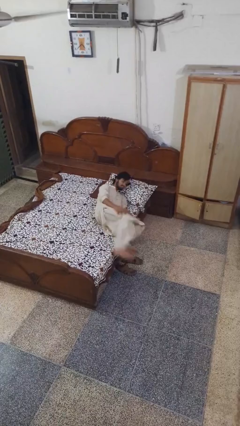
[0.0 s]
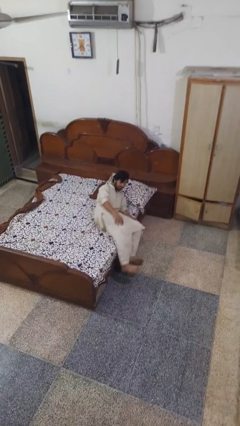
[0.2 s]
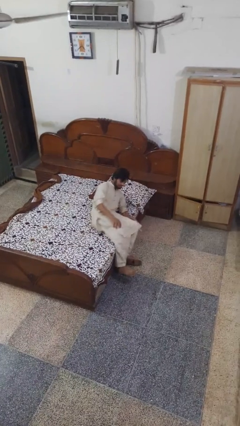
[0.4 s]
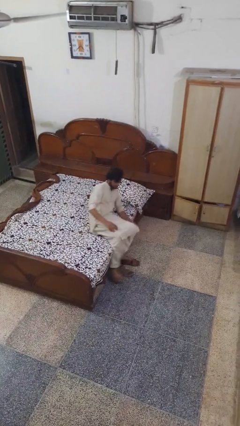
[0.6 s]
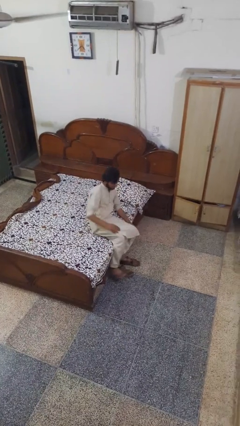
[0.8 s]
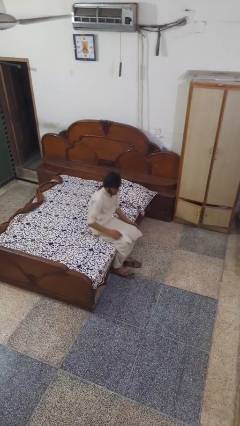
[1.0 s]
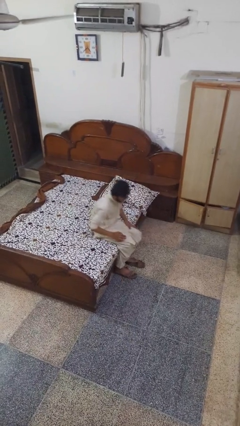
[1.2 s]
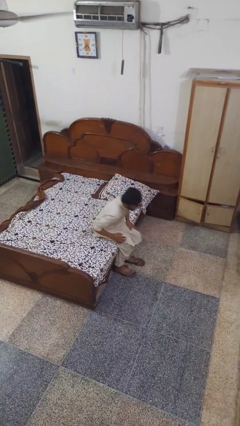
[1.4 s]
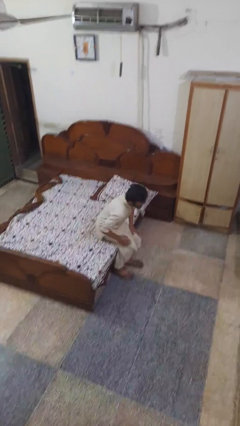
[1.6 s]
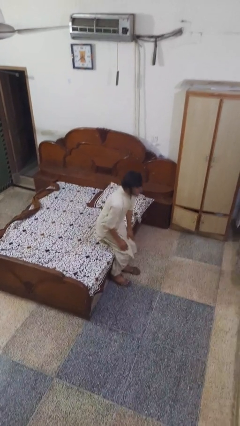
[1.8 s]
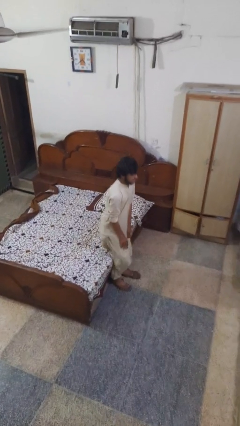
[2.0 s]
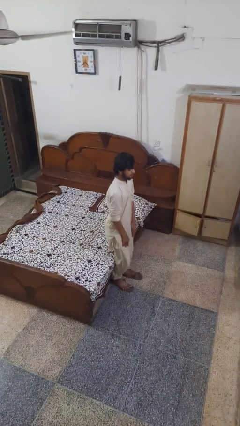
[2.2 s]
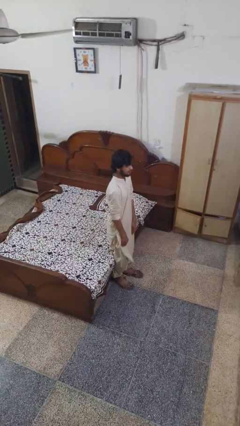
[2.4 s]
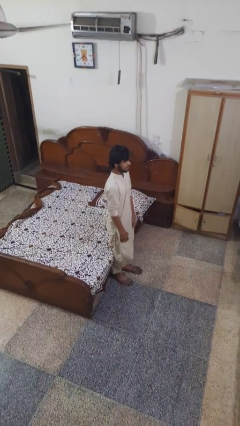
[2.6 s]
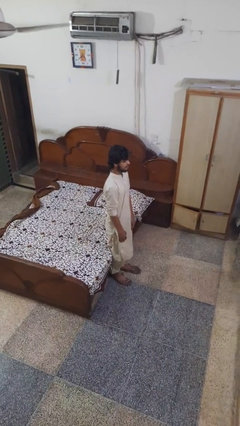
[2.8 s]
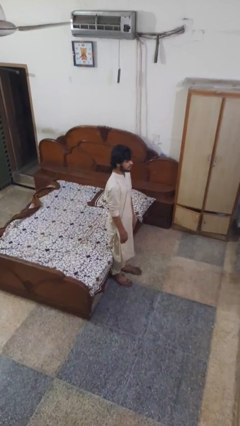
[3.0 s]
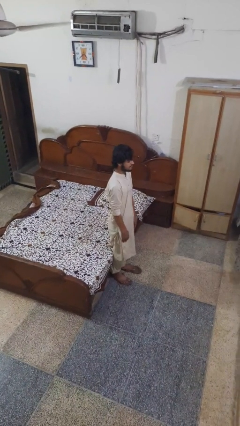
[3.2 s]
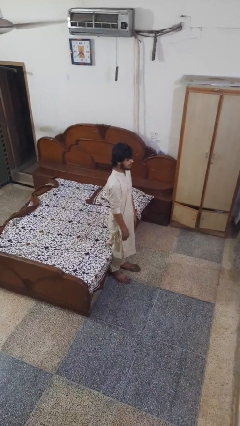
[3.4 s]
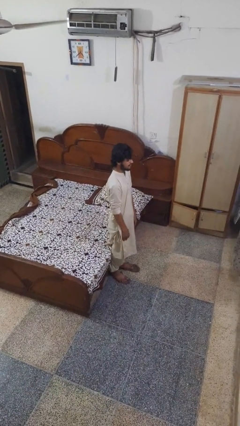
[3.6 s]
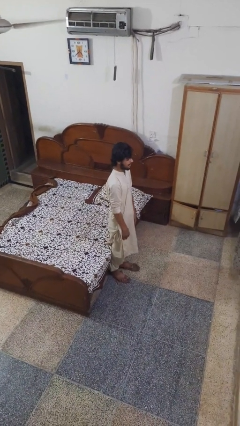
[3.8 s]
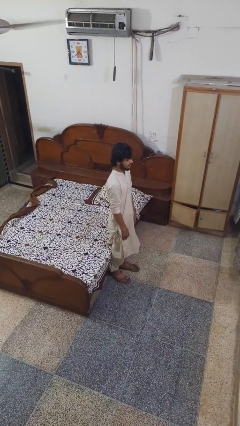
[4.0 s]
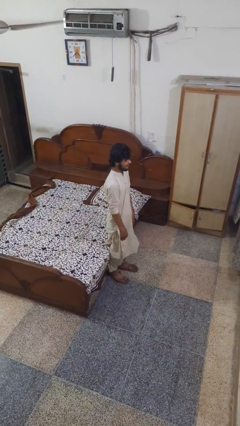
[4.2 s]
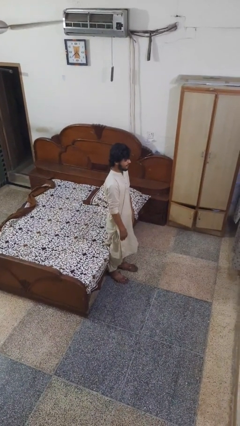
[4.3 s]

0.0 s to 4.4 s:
person stands up

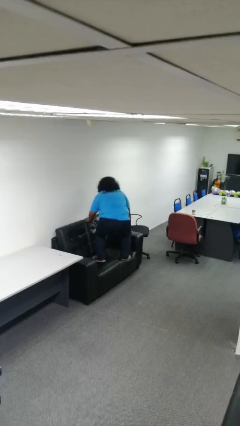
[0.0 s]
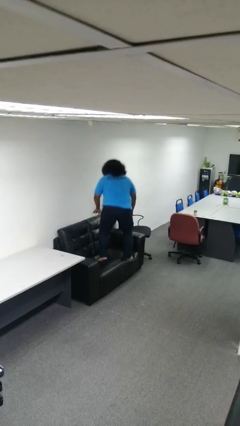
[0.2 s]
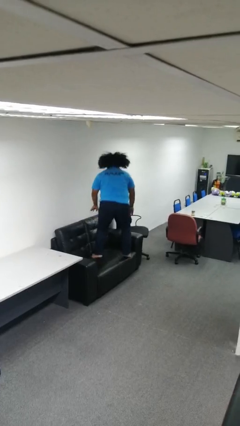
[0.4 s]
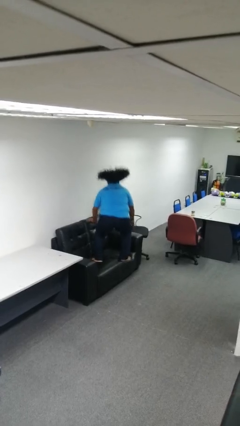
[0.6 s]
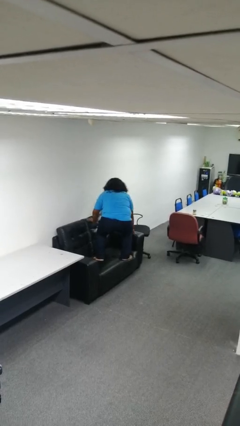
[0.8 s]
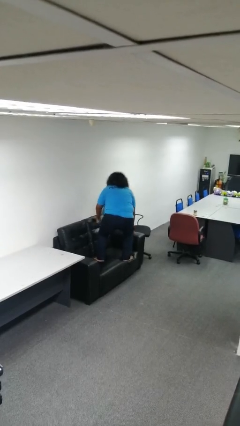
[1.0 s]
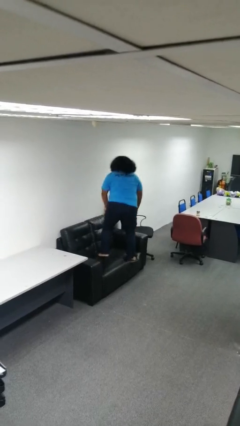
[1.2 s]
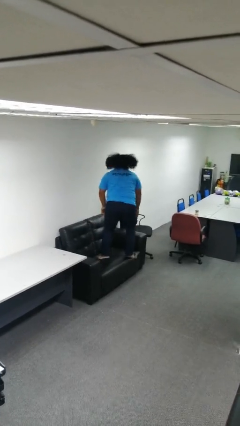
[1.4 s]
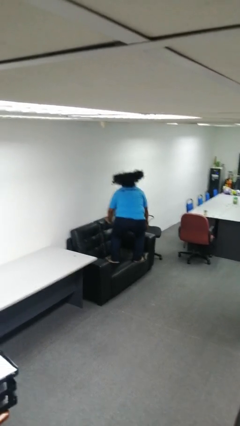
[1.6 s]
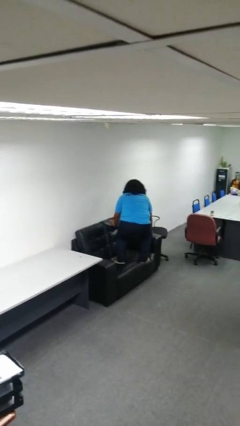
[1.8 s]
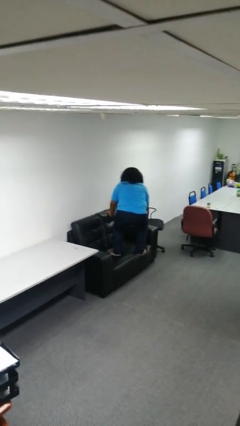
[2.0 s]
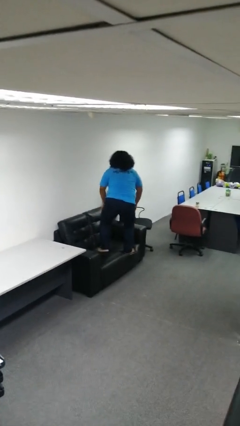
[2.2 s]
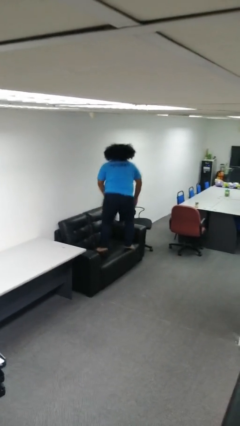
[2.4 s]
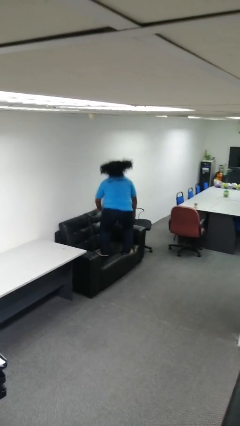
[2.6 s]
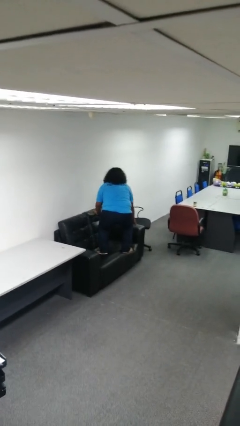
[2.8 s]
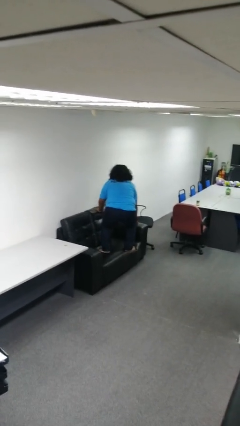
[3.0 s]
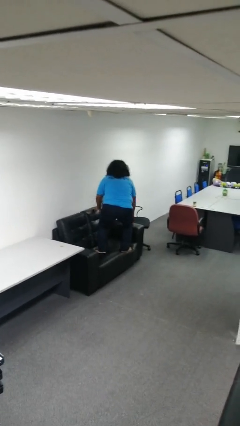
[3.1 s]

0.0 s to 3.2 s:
person jumps on couch

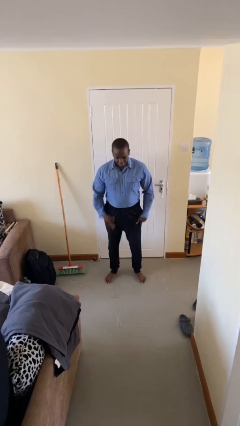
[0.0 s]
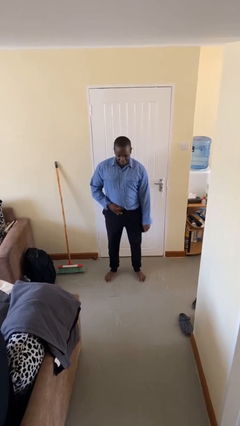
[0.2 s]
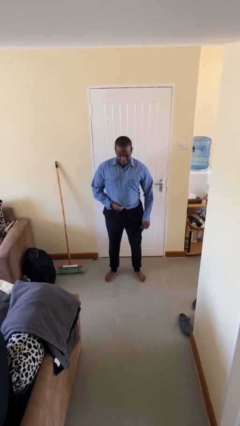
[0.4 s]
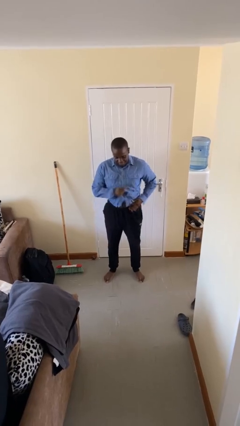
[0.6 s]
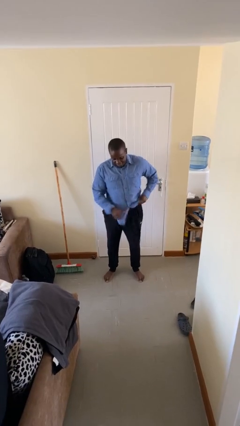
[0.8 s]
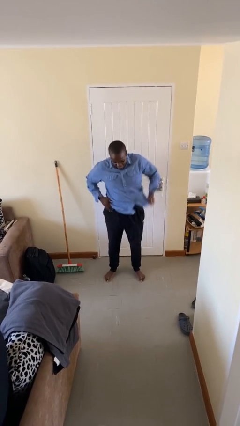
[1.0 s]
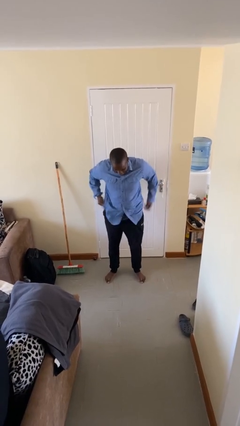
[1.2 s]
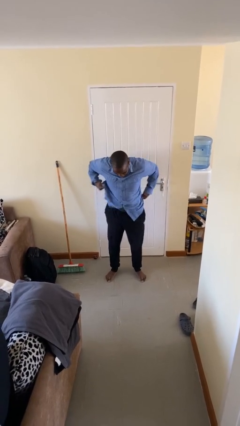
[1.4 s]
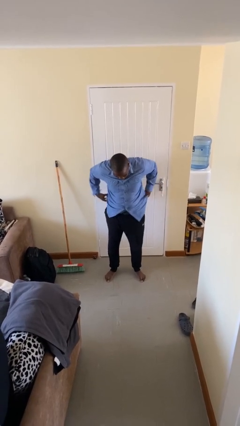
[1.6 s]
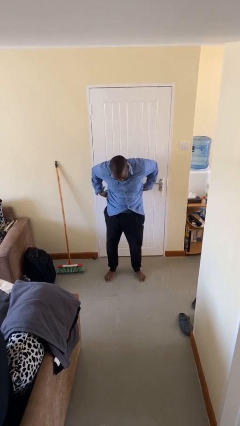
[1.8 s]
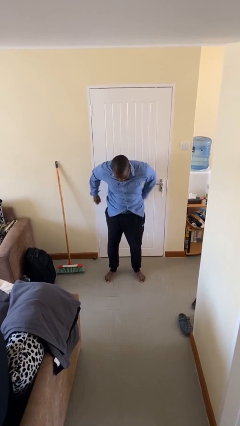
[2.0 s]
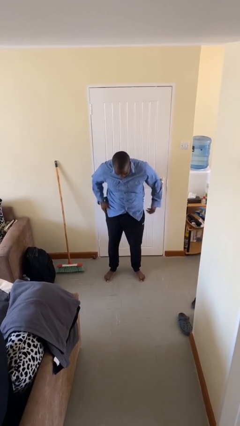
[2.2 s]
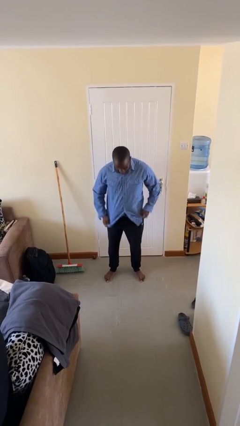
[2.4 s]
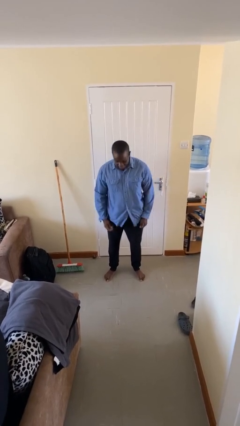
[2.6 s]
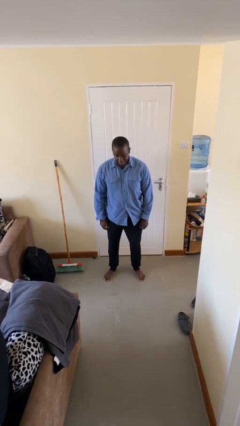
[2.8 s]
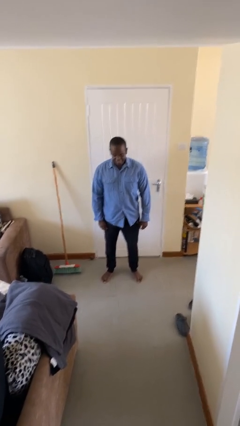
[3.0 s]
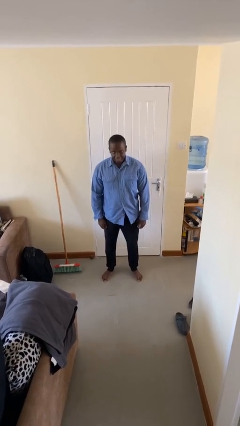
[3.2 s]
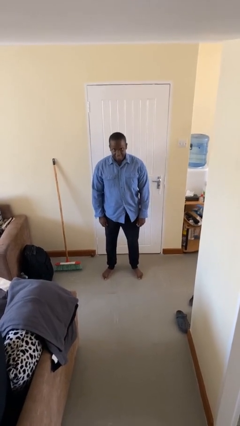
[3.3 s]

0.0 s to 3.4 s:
person untucks shirt

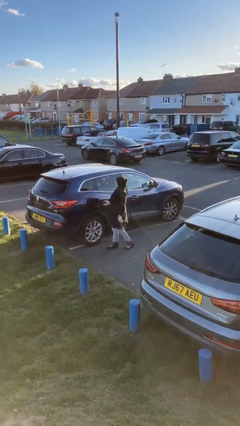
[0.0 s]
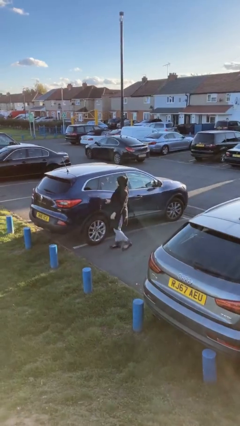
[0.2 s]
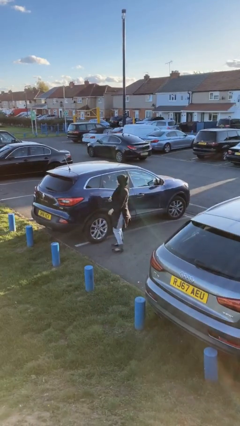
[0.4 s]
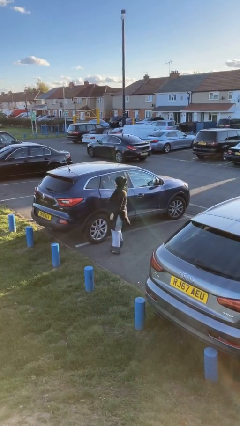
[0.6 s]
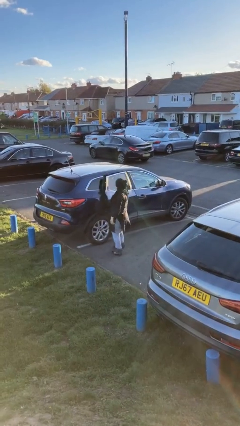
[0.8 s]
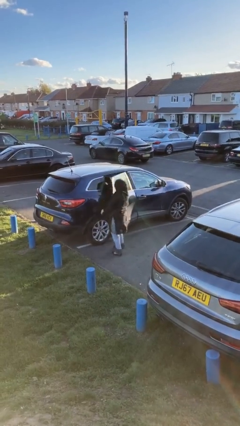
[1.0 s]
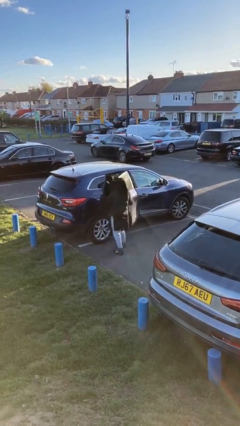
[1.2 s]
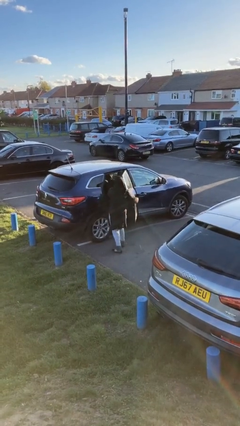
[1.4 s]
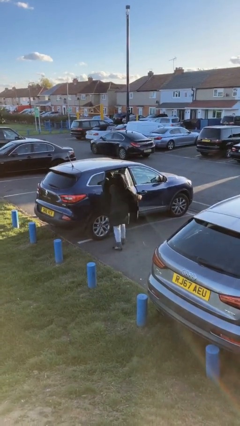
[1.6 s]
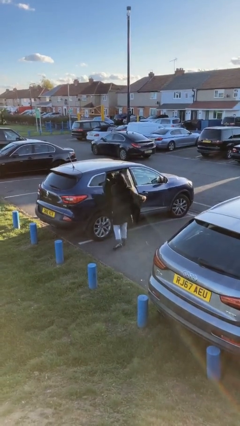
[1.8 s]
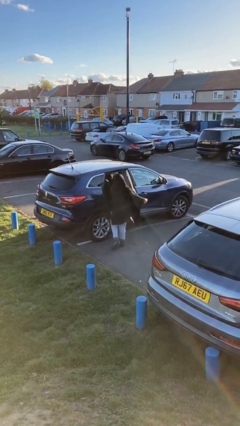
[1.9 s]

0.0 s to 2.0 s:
person opens car door

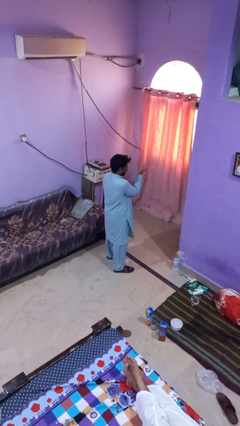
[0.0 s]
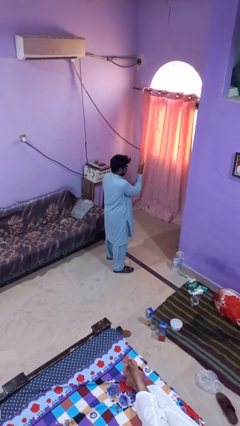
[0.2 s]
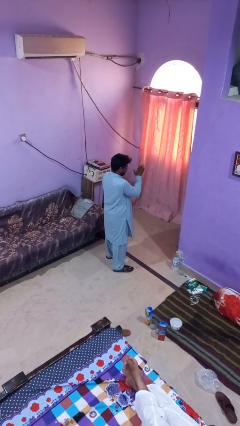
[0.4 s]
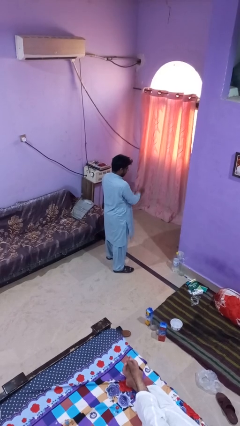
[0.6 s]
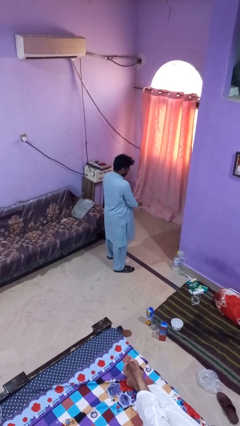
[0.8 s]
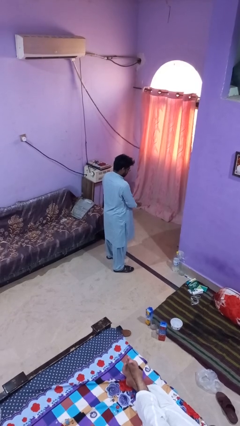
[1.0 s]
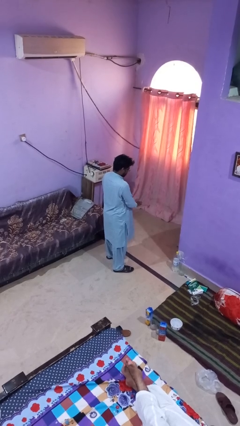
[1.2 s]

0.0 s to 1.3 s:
person gestures swipe down

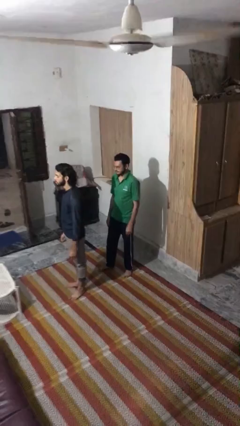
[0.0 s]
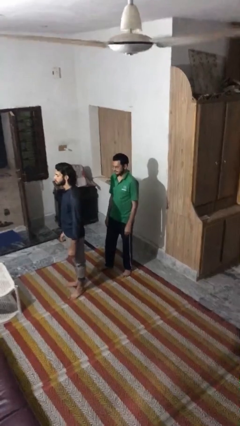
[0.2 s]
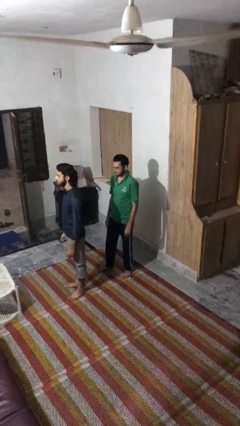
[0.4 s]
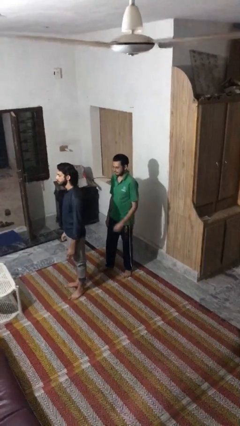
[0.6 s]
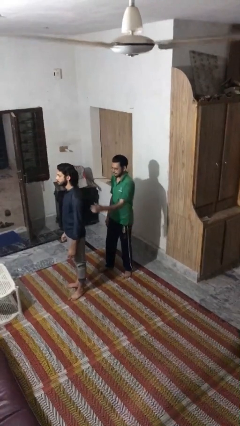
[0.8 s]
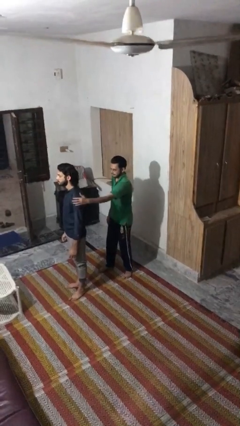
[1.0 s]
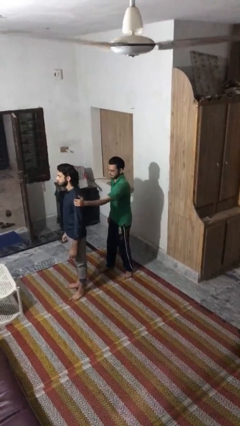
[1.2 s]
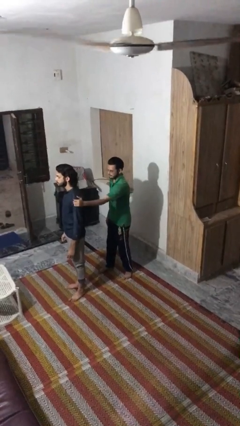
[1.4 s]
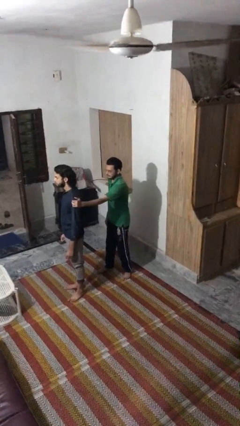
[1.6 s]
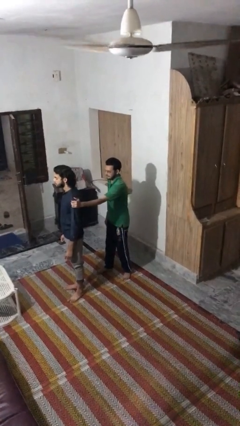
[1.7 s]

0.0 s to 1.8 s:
person grabs person by shoulder

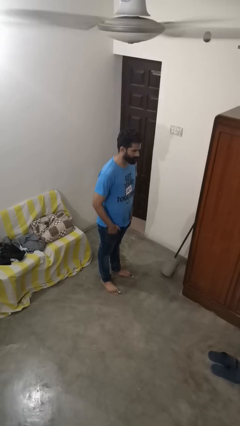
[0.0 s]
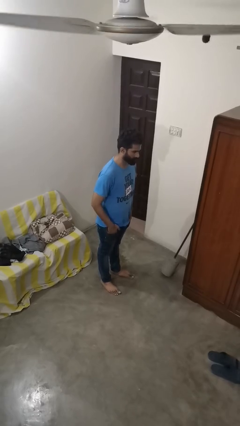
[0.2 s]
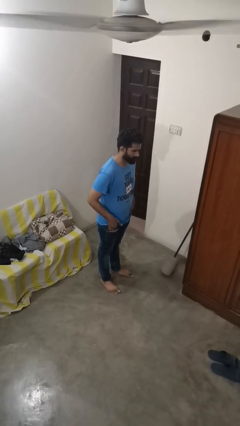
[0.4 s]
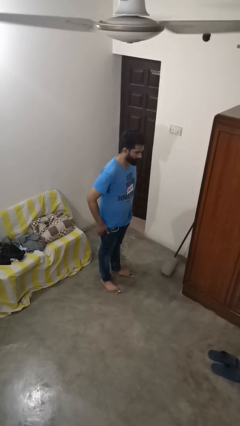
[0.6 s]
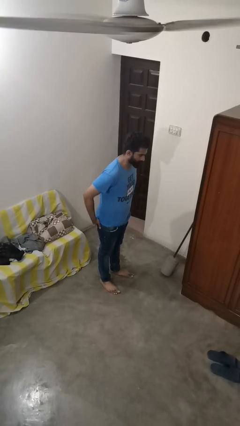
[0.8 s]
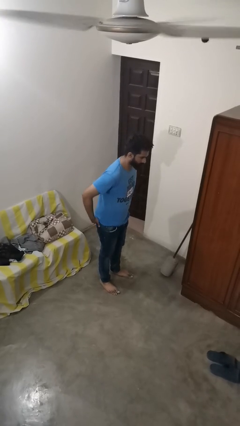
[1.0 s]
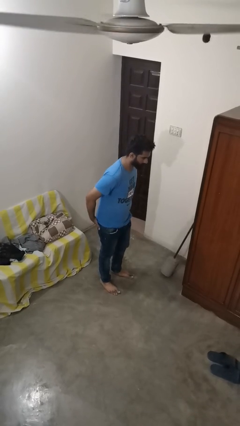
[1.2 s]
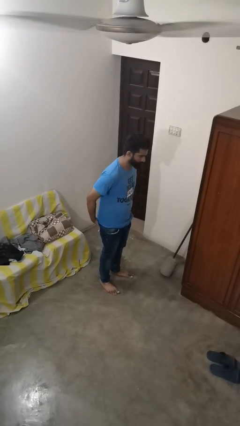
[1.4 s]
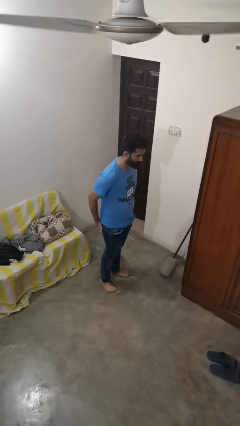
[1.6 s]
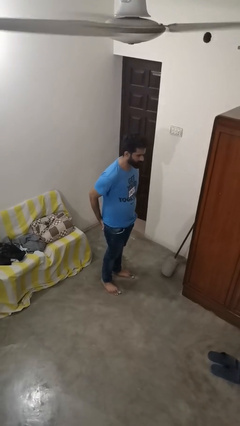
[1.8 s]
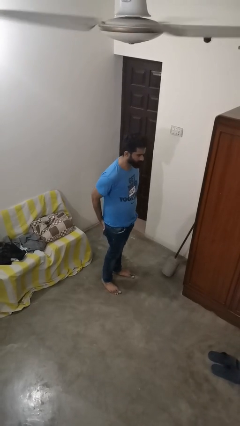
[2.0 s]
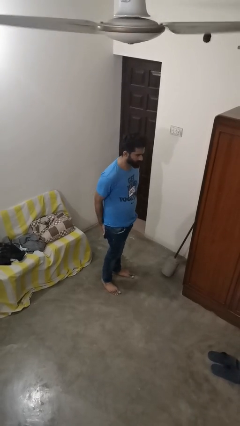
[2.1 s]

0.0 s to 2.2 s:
person puts hands in back pockets
